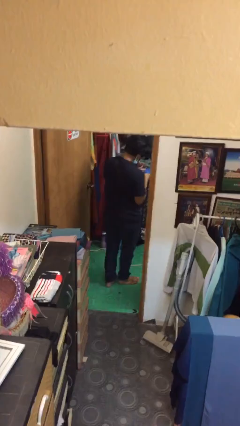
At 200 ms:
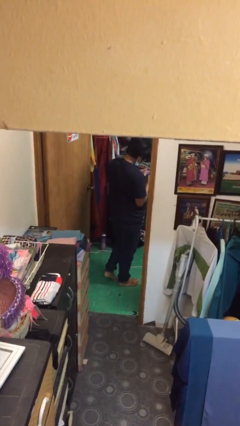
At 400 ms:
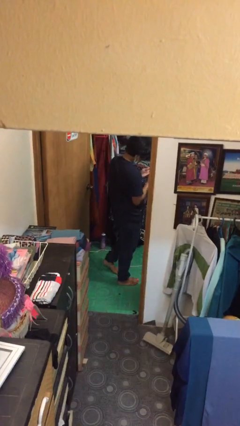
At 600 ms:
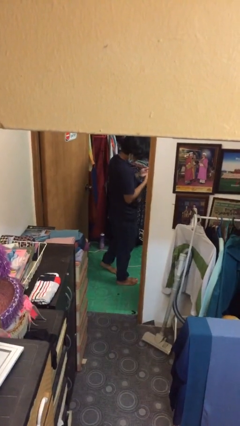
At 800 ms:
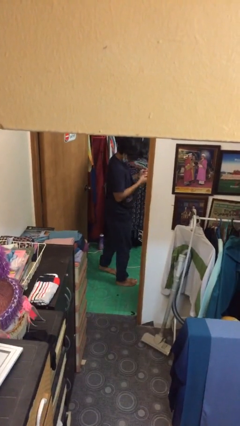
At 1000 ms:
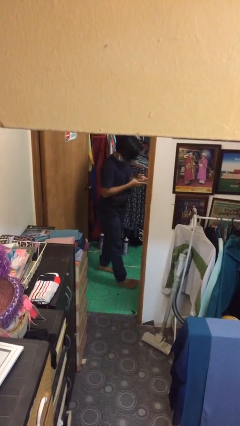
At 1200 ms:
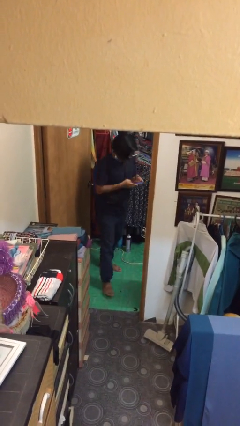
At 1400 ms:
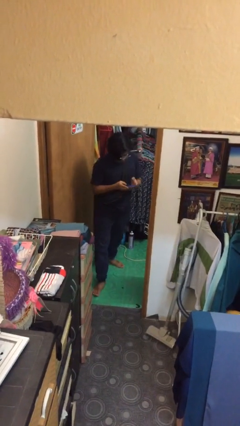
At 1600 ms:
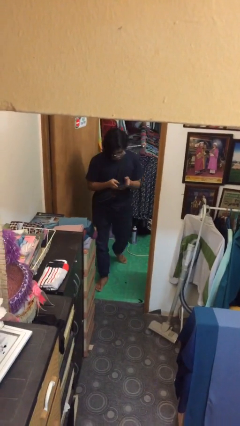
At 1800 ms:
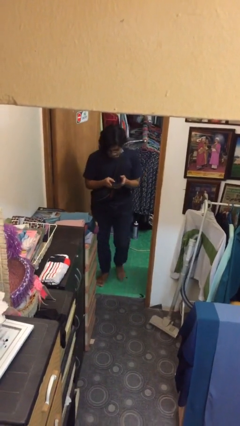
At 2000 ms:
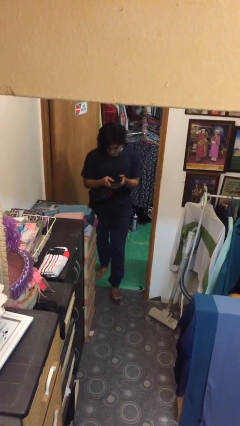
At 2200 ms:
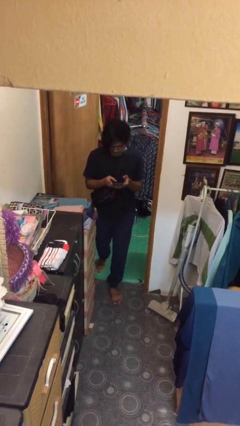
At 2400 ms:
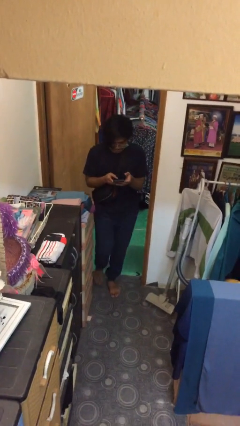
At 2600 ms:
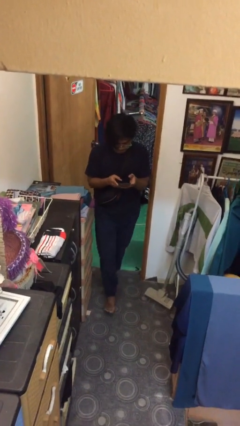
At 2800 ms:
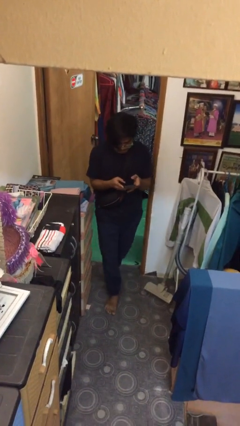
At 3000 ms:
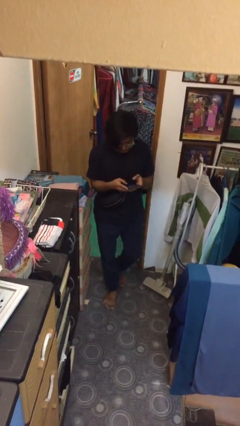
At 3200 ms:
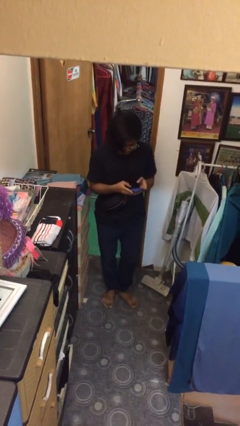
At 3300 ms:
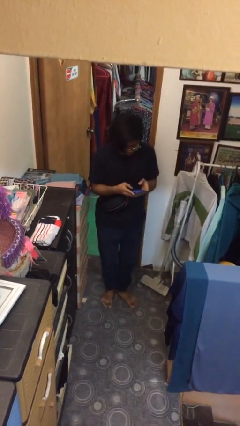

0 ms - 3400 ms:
person enters scene through structure

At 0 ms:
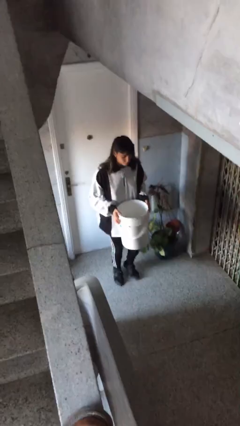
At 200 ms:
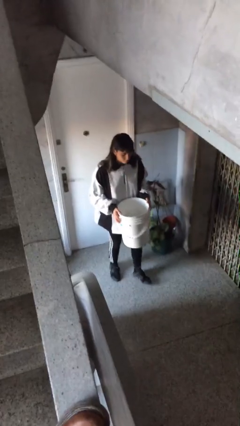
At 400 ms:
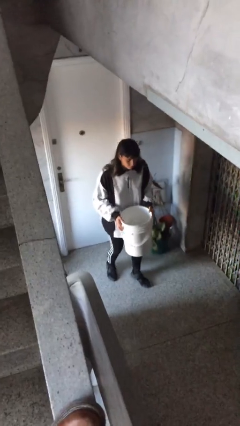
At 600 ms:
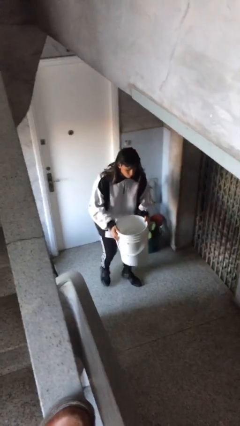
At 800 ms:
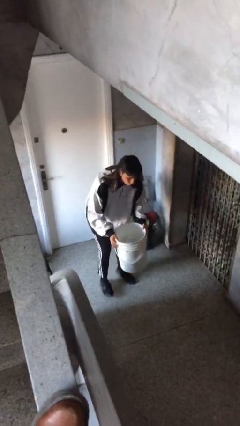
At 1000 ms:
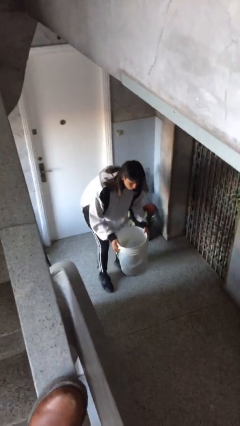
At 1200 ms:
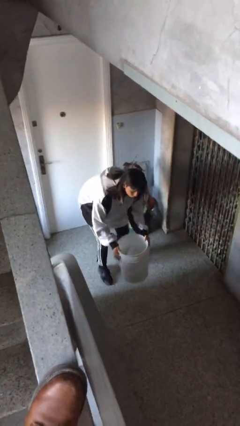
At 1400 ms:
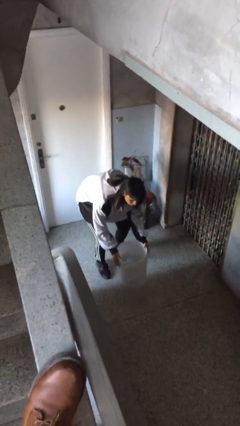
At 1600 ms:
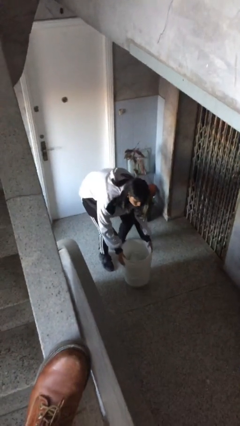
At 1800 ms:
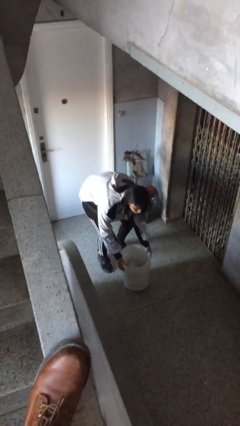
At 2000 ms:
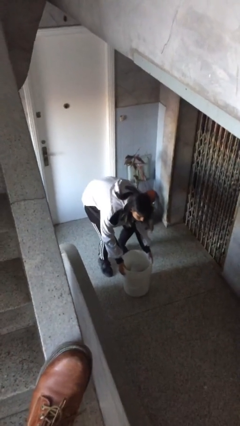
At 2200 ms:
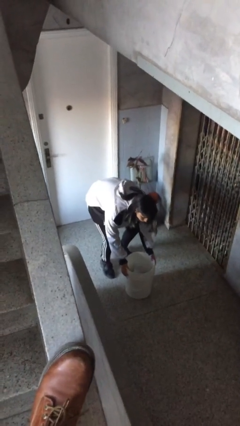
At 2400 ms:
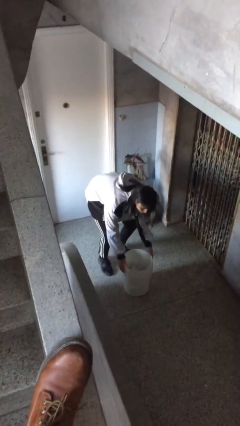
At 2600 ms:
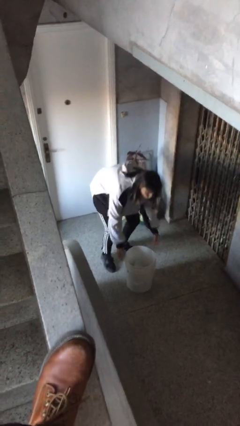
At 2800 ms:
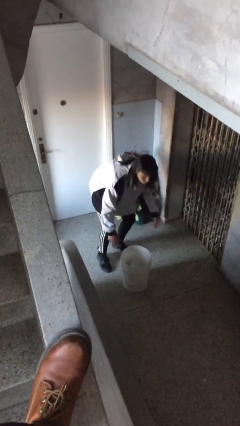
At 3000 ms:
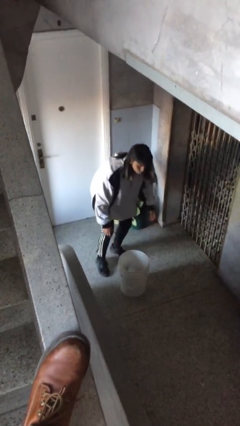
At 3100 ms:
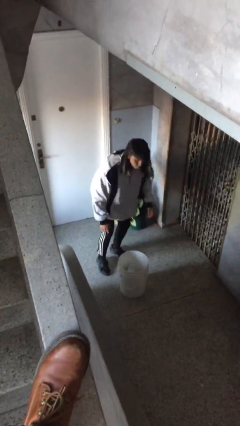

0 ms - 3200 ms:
person puts down object on floor

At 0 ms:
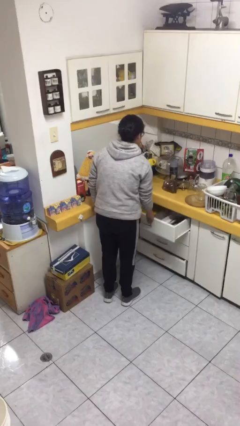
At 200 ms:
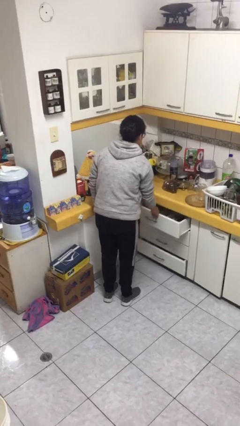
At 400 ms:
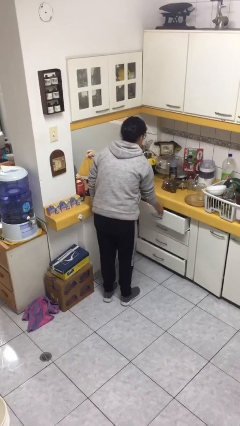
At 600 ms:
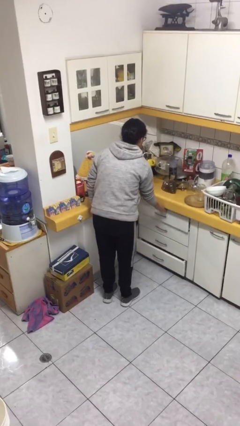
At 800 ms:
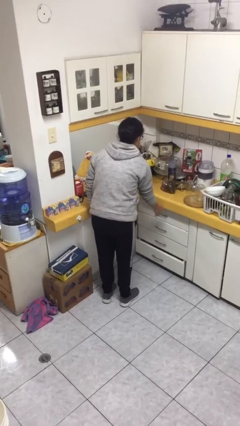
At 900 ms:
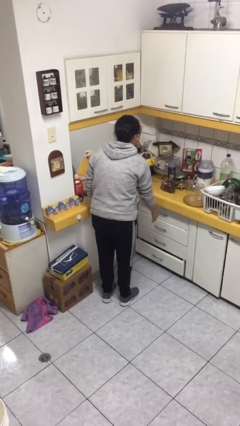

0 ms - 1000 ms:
person closes kitchen drawer

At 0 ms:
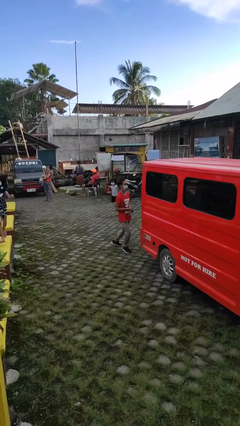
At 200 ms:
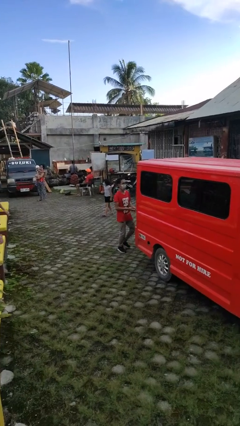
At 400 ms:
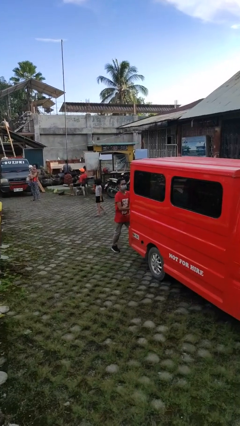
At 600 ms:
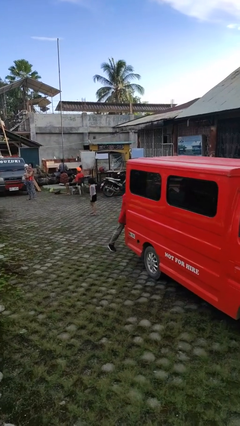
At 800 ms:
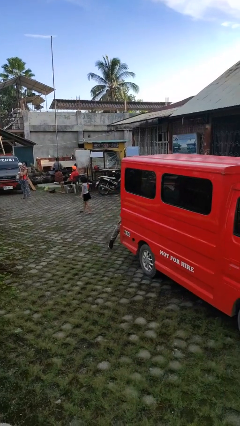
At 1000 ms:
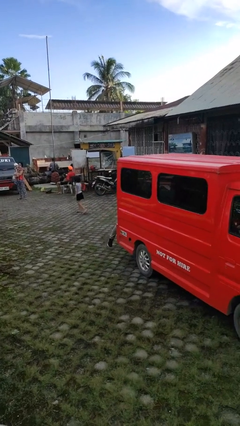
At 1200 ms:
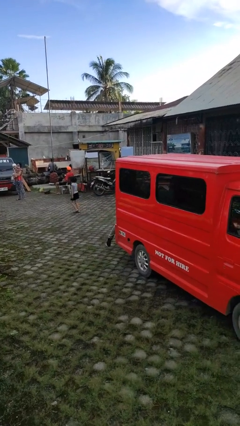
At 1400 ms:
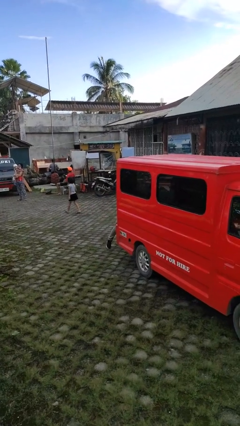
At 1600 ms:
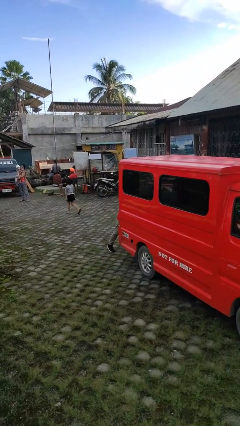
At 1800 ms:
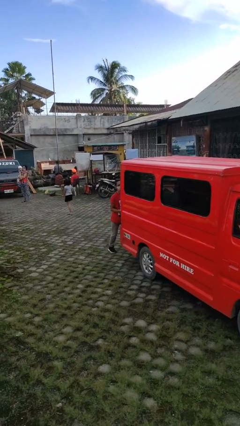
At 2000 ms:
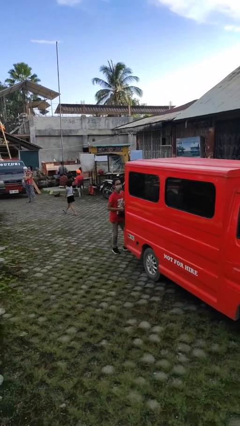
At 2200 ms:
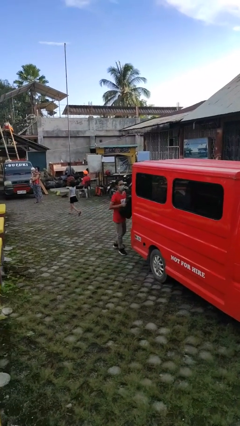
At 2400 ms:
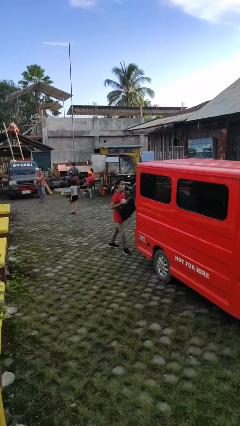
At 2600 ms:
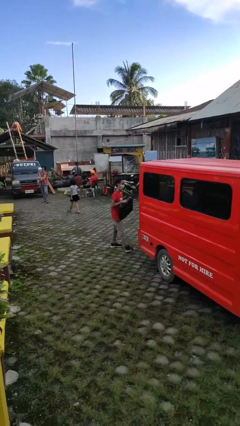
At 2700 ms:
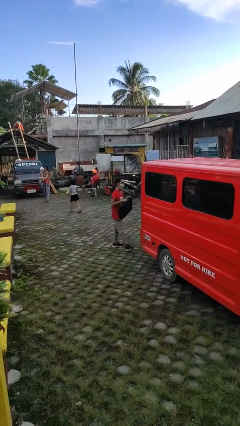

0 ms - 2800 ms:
person unloads car

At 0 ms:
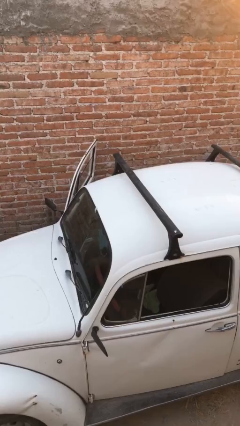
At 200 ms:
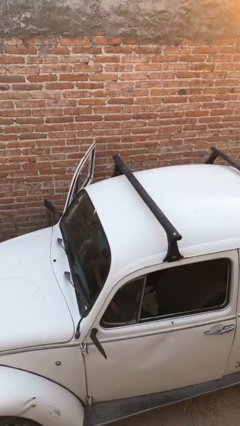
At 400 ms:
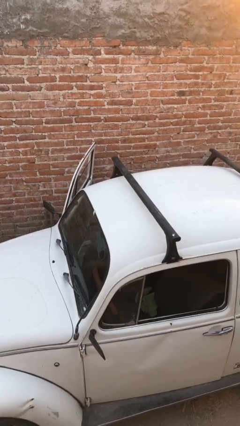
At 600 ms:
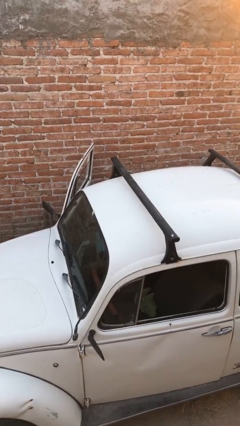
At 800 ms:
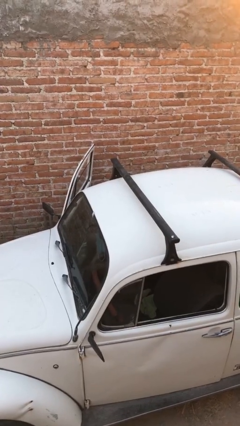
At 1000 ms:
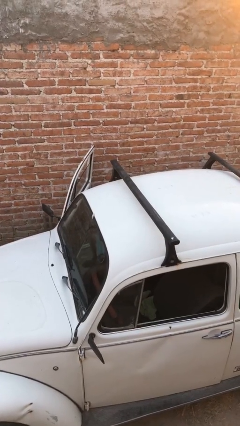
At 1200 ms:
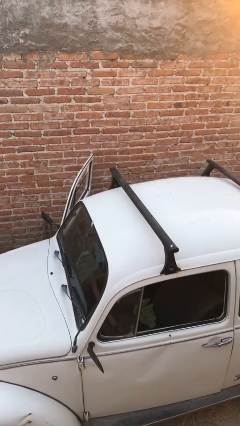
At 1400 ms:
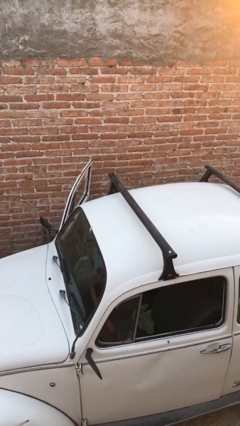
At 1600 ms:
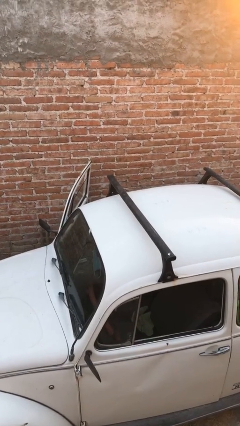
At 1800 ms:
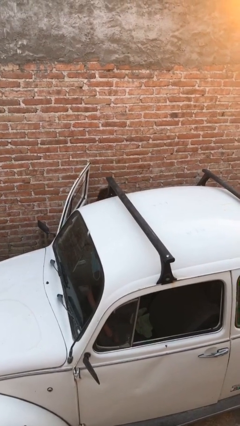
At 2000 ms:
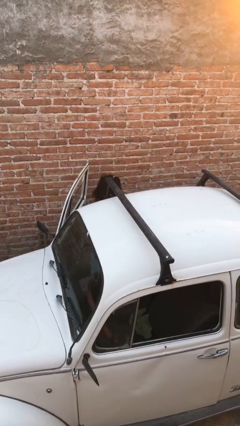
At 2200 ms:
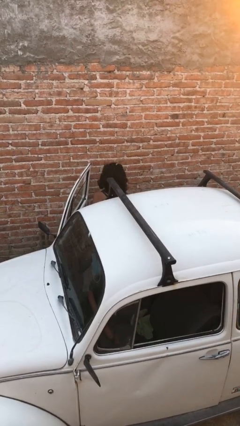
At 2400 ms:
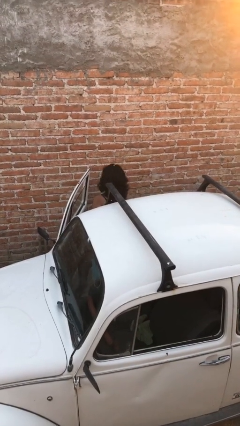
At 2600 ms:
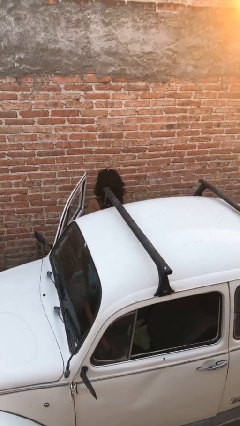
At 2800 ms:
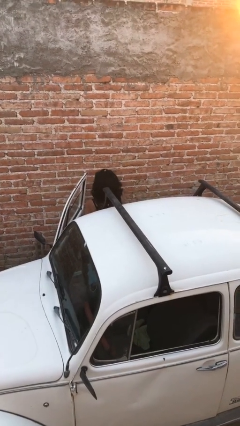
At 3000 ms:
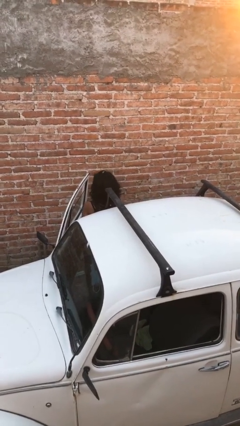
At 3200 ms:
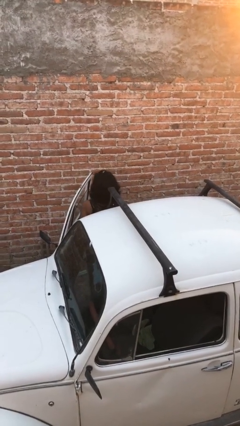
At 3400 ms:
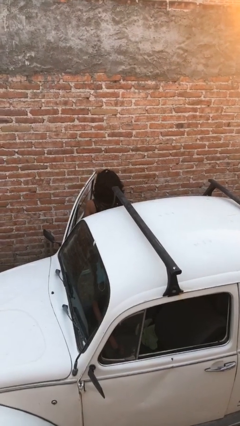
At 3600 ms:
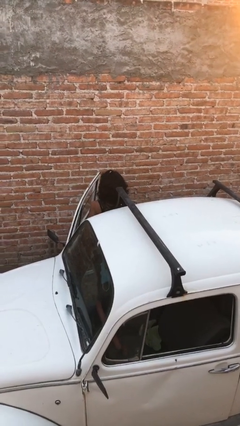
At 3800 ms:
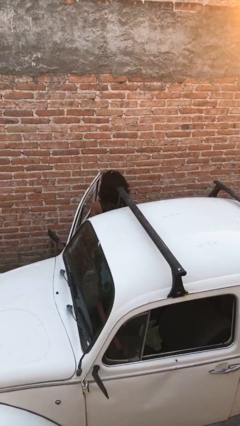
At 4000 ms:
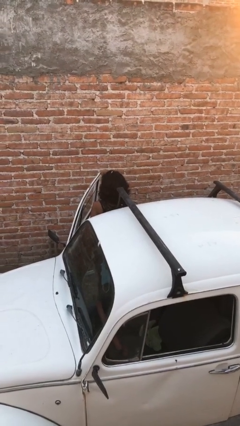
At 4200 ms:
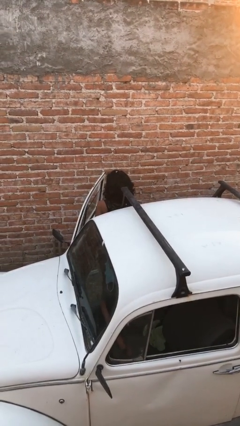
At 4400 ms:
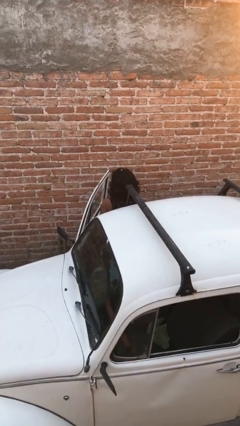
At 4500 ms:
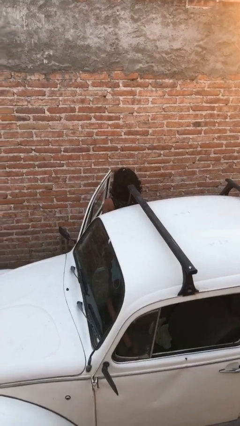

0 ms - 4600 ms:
person exits car

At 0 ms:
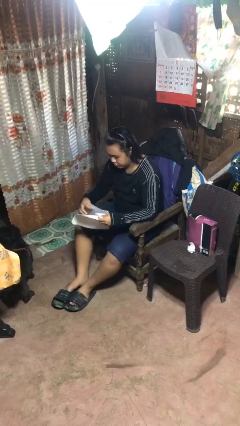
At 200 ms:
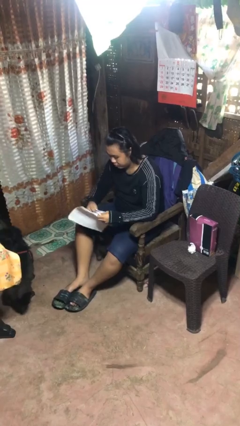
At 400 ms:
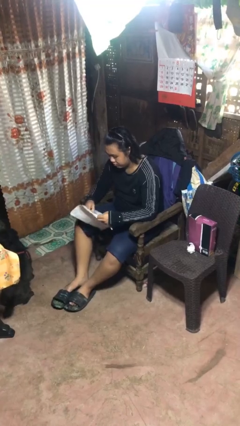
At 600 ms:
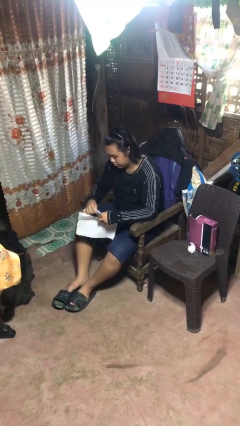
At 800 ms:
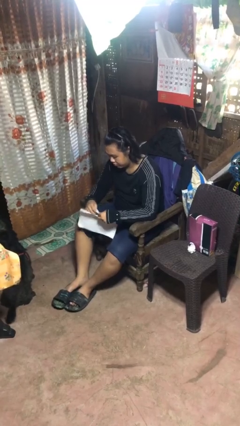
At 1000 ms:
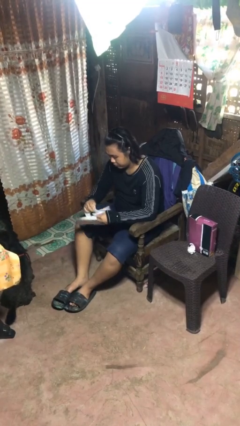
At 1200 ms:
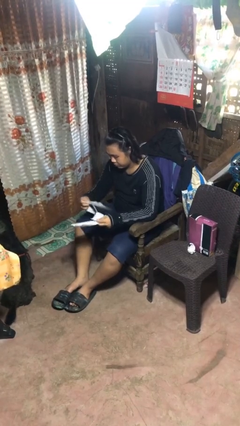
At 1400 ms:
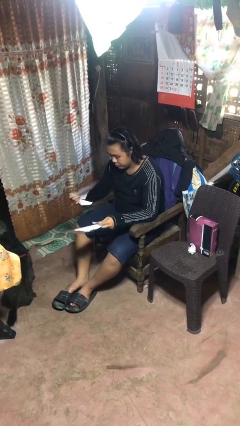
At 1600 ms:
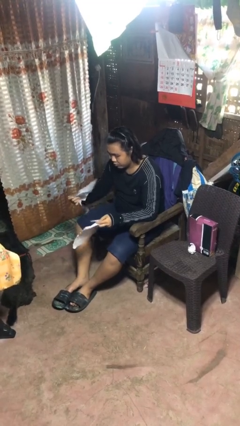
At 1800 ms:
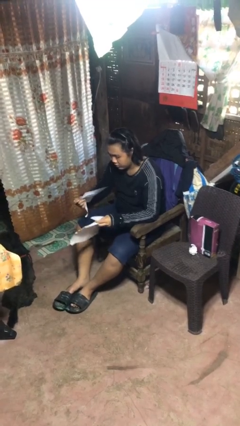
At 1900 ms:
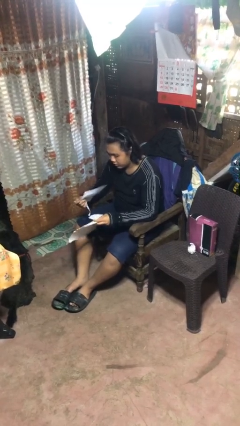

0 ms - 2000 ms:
person tears paper
